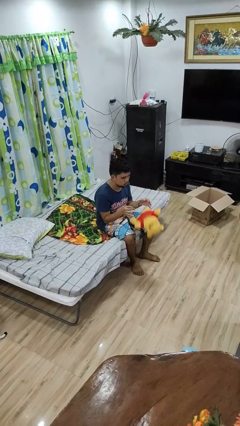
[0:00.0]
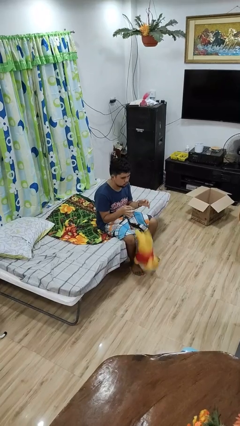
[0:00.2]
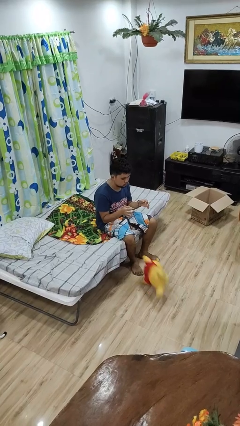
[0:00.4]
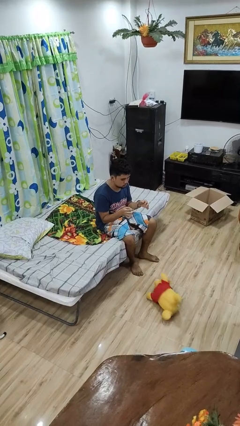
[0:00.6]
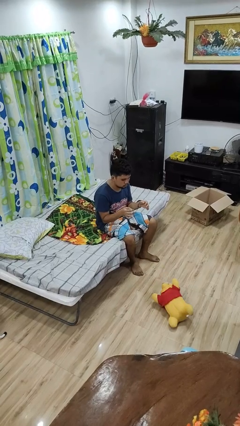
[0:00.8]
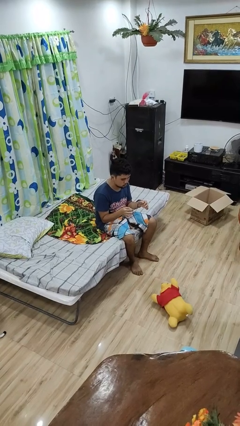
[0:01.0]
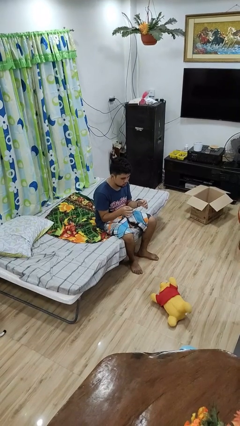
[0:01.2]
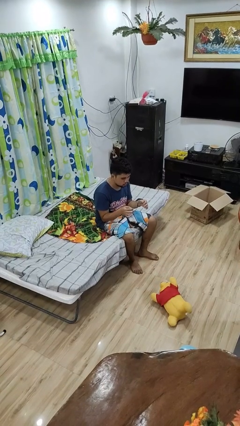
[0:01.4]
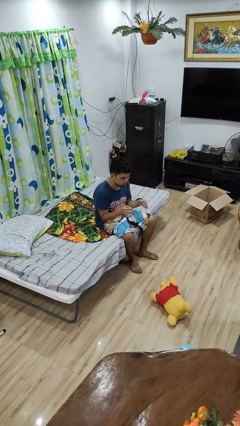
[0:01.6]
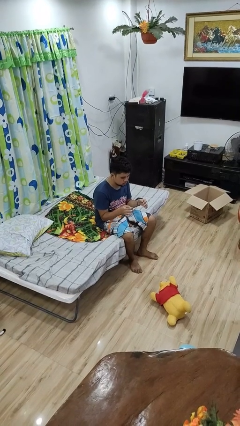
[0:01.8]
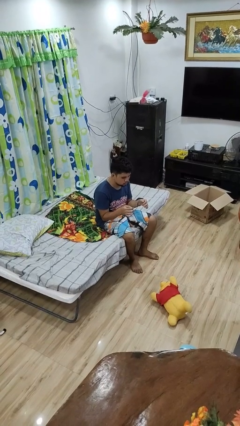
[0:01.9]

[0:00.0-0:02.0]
person drops object

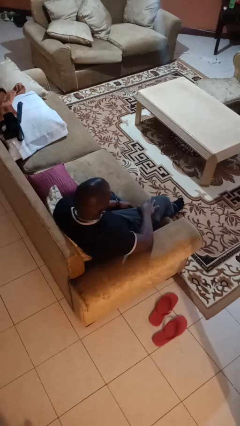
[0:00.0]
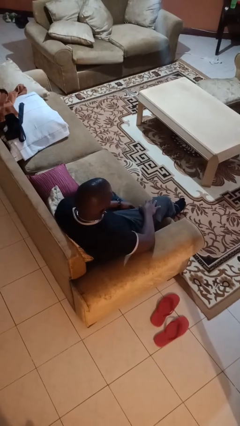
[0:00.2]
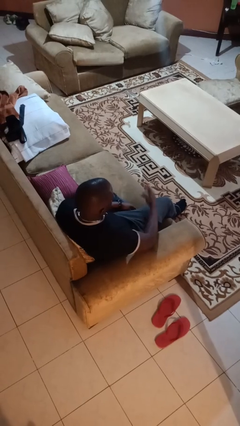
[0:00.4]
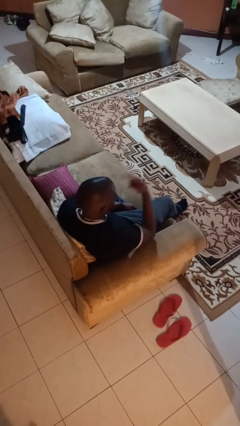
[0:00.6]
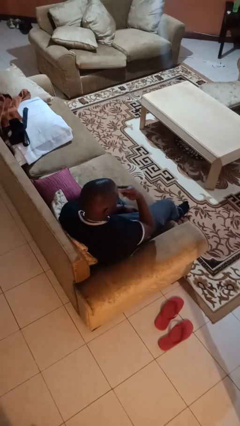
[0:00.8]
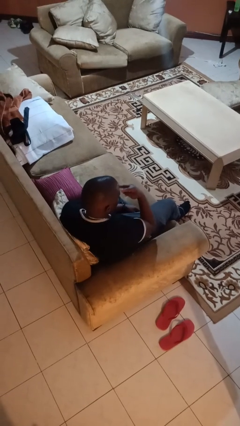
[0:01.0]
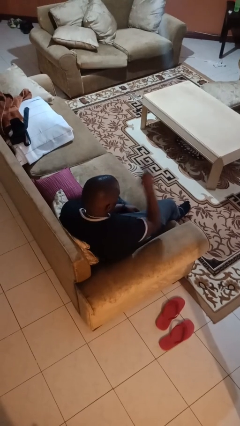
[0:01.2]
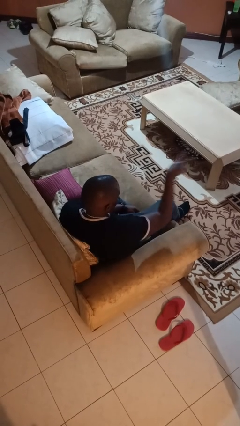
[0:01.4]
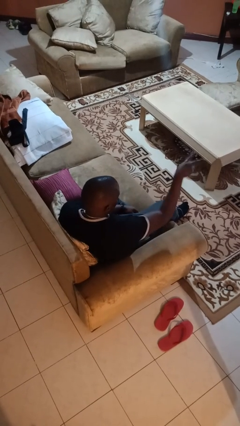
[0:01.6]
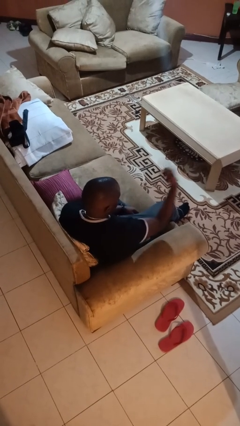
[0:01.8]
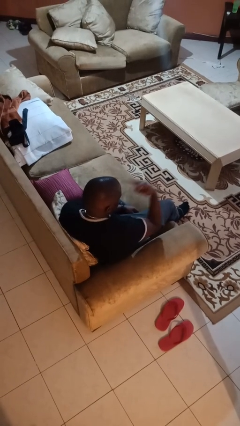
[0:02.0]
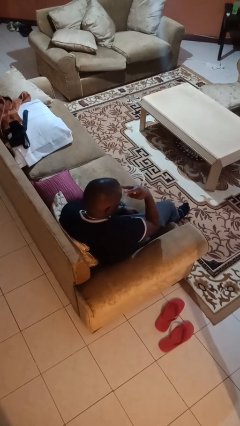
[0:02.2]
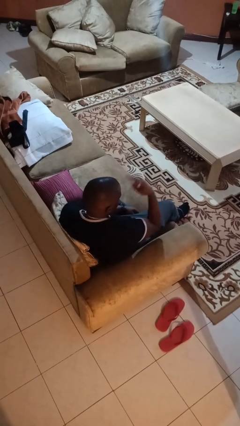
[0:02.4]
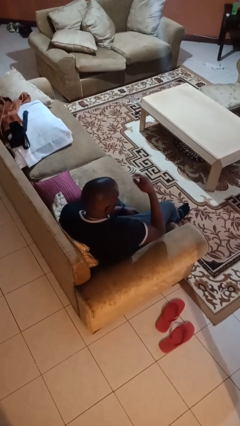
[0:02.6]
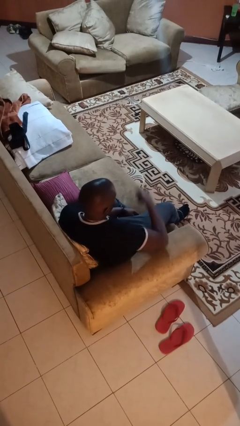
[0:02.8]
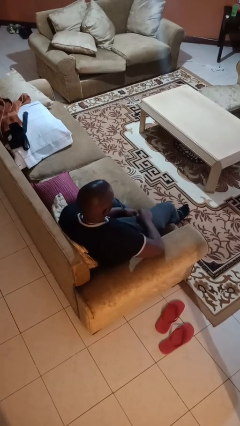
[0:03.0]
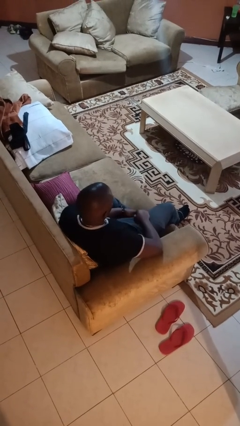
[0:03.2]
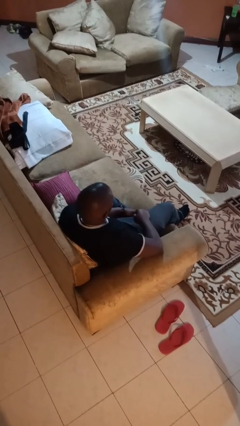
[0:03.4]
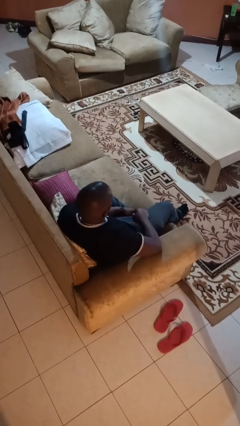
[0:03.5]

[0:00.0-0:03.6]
person gestures watch closely

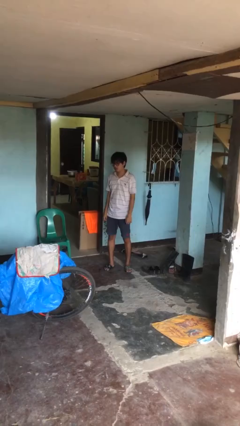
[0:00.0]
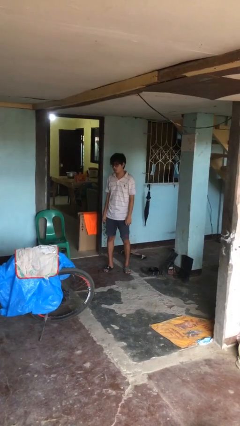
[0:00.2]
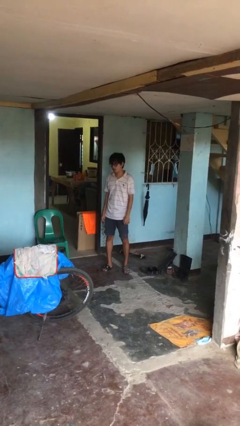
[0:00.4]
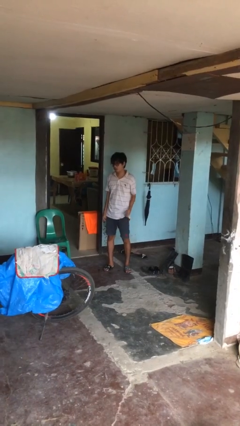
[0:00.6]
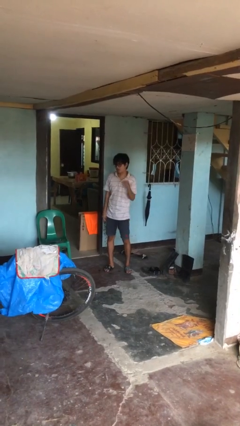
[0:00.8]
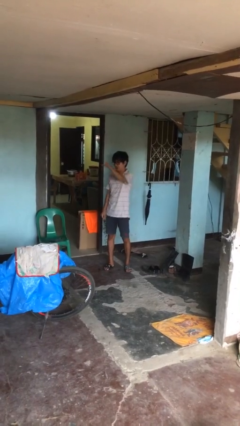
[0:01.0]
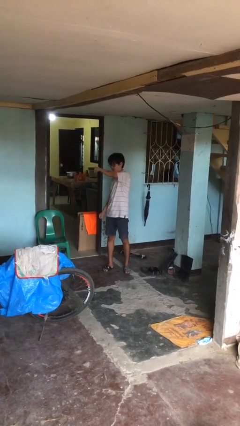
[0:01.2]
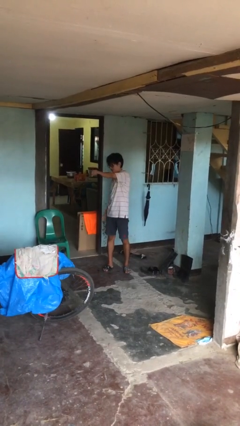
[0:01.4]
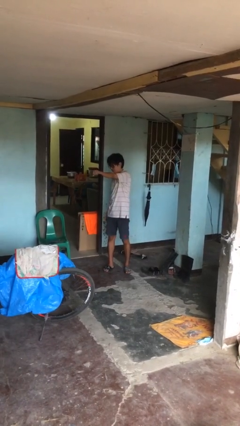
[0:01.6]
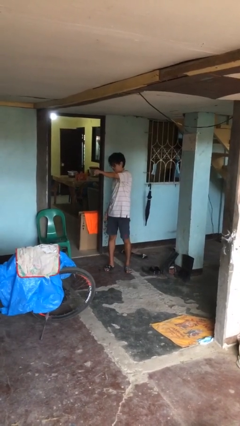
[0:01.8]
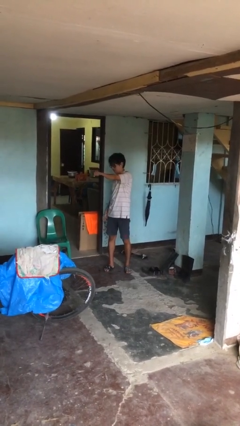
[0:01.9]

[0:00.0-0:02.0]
person punches

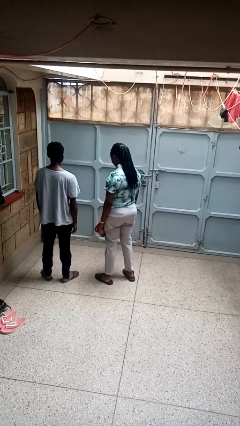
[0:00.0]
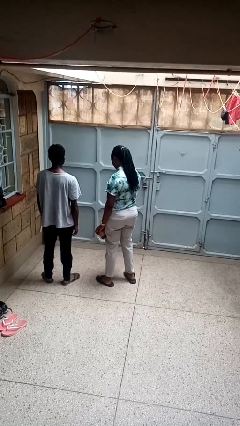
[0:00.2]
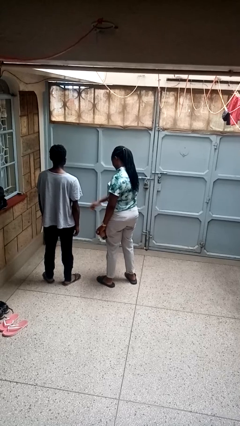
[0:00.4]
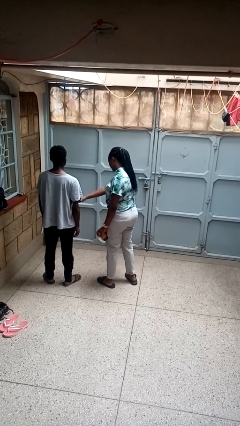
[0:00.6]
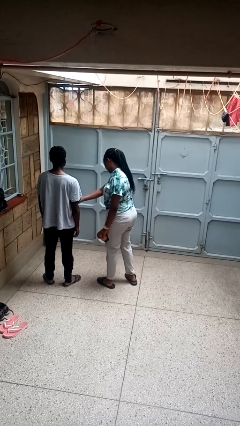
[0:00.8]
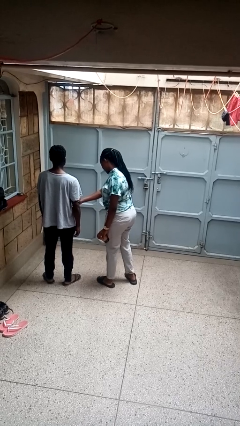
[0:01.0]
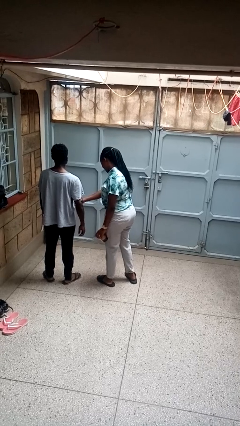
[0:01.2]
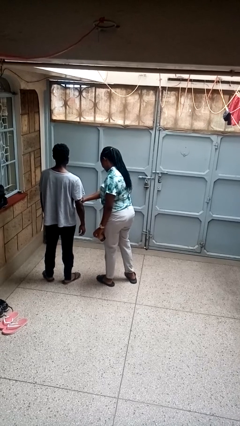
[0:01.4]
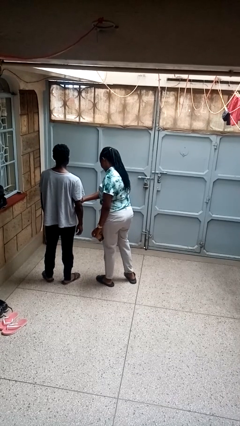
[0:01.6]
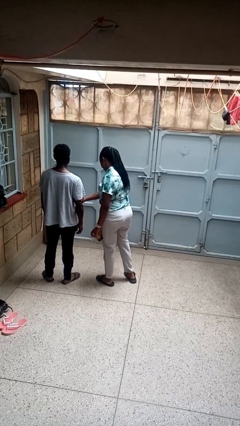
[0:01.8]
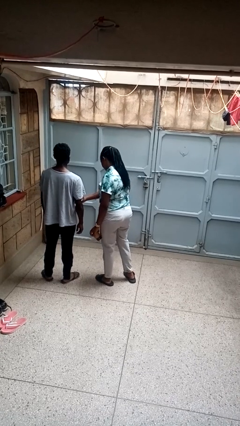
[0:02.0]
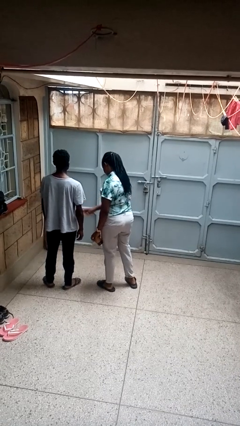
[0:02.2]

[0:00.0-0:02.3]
person grabs person by bicep

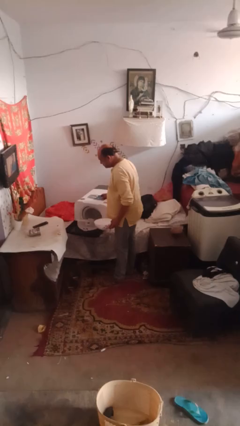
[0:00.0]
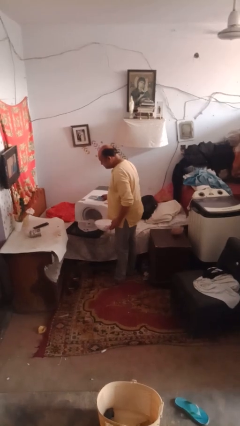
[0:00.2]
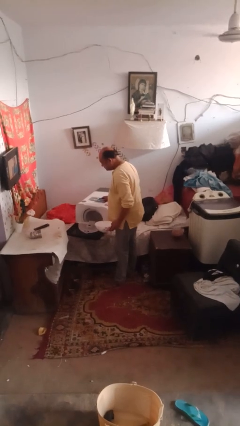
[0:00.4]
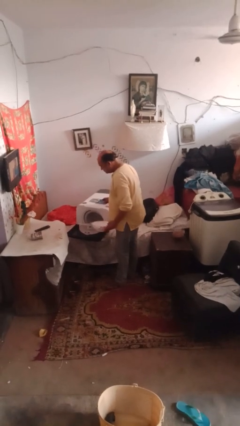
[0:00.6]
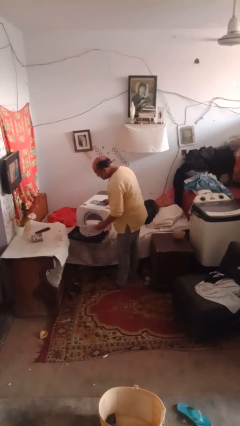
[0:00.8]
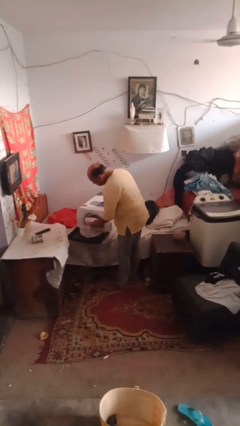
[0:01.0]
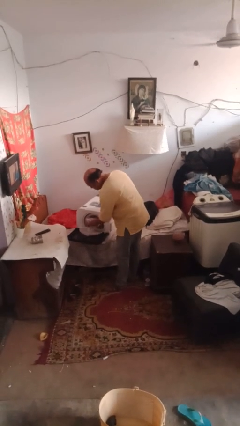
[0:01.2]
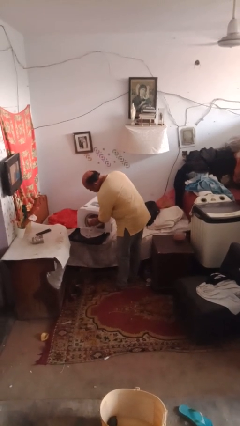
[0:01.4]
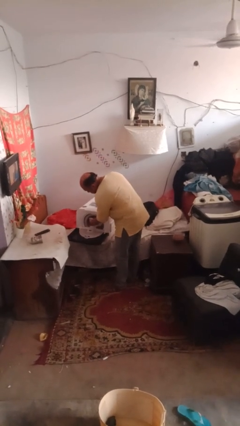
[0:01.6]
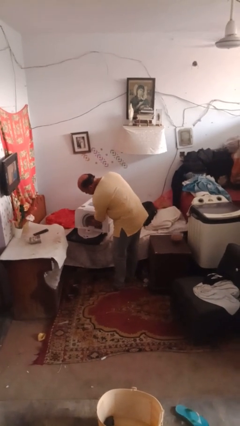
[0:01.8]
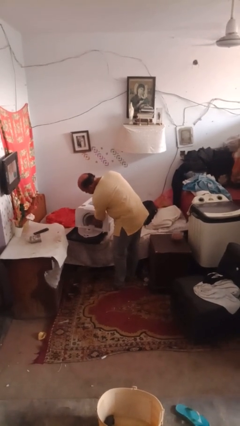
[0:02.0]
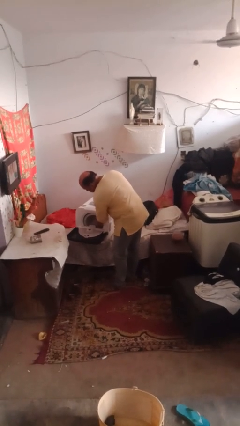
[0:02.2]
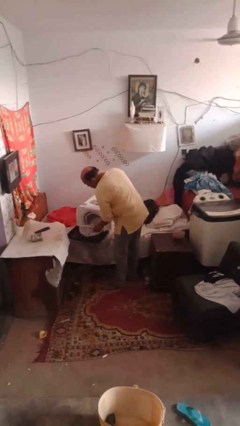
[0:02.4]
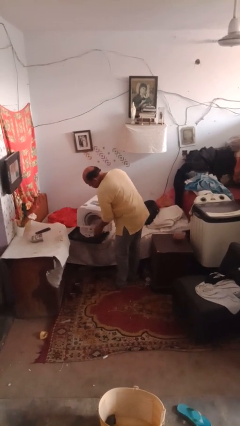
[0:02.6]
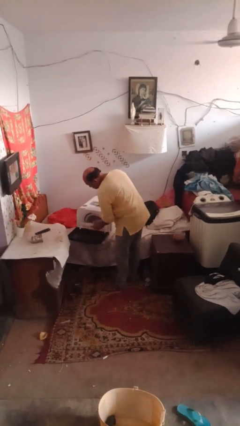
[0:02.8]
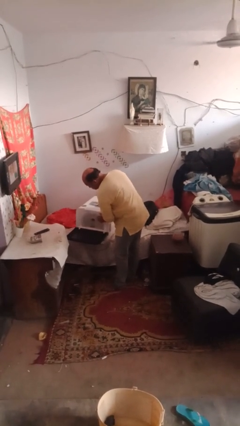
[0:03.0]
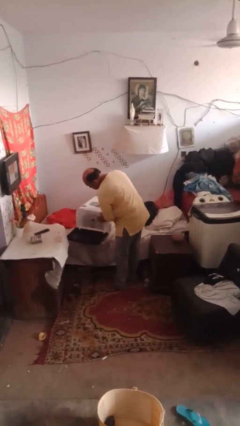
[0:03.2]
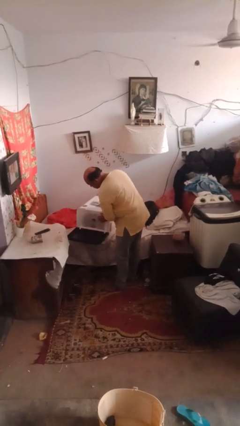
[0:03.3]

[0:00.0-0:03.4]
person loads dishwasher

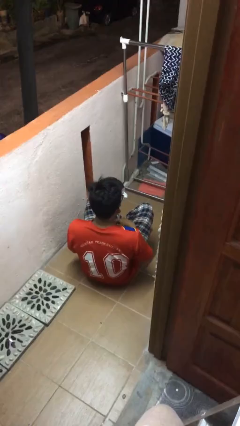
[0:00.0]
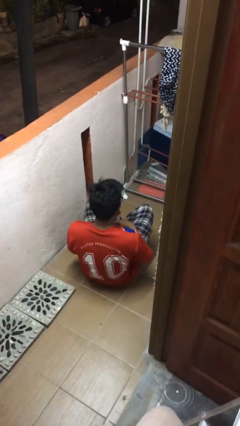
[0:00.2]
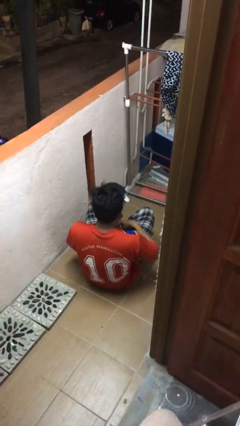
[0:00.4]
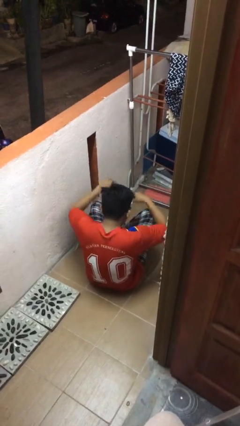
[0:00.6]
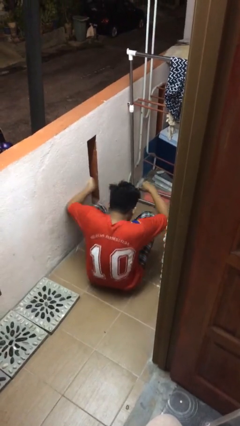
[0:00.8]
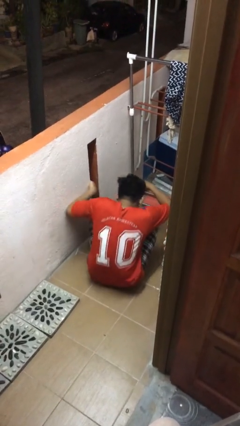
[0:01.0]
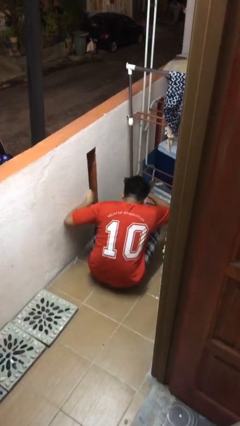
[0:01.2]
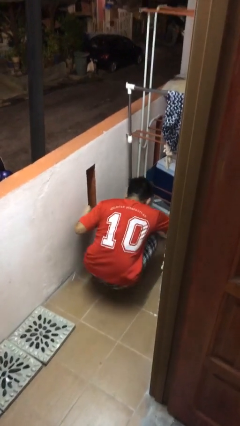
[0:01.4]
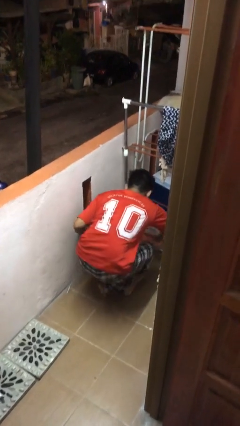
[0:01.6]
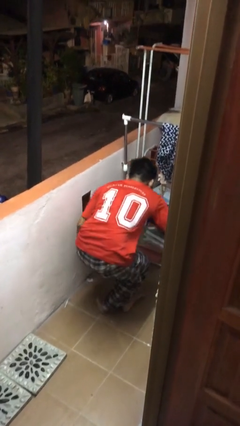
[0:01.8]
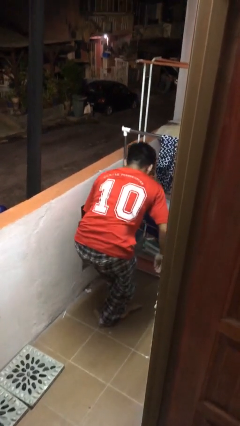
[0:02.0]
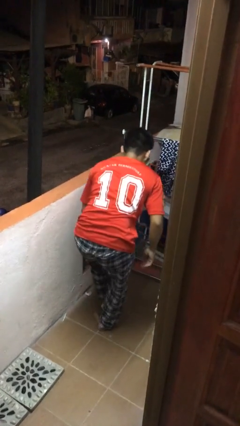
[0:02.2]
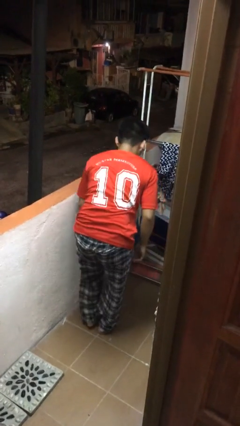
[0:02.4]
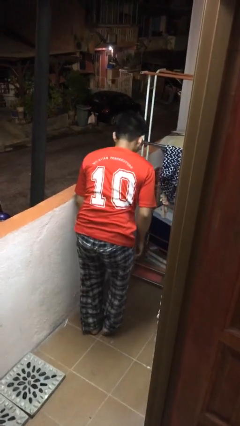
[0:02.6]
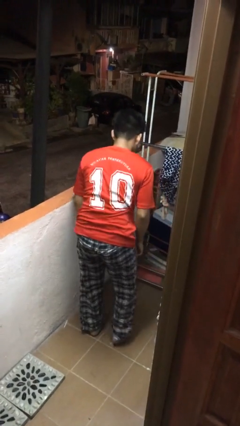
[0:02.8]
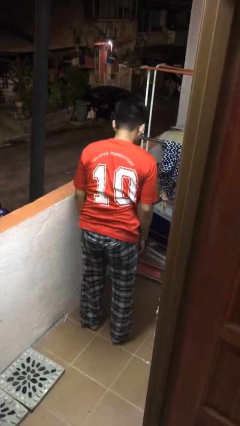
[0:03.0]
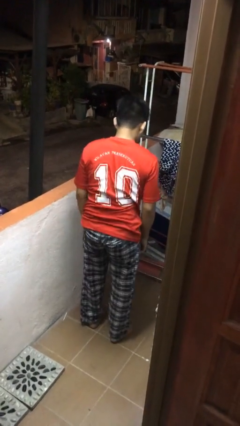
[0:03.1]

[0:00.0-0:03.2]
person stands up from floor

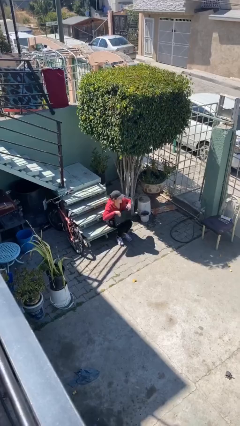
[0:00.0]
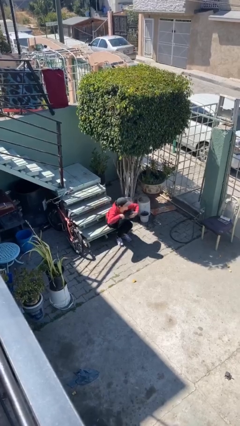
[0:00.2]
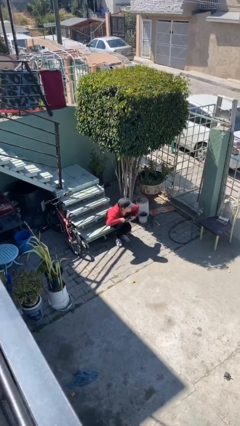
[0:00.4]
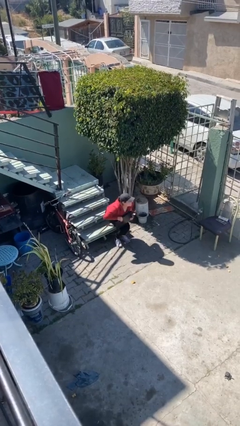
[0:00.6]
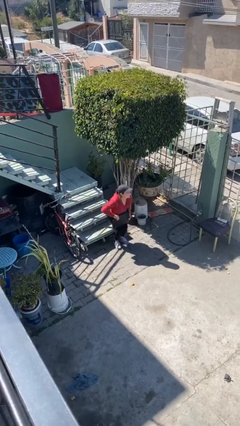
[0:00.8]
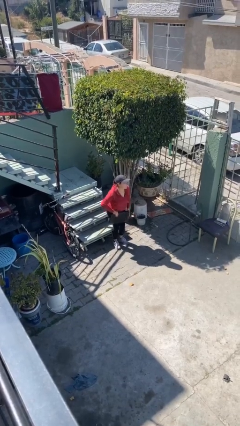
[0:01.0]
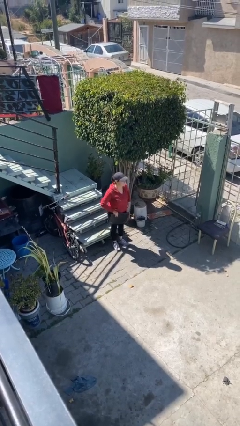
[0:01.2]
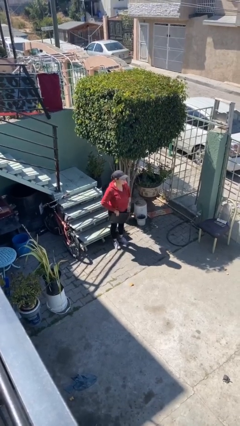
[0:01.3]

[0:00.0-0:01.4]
person stands up
